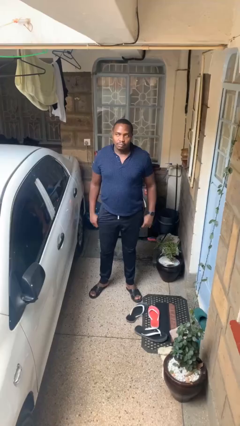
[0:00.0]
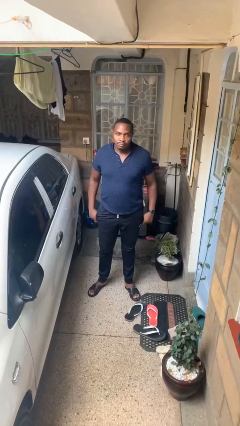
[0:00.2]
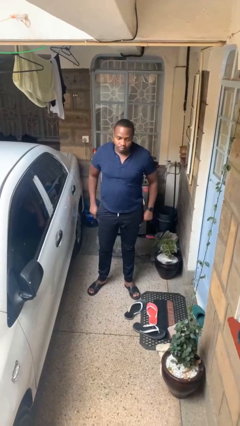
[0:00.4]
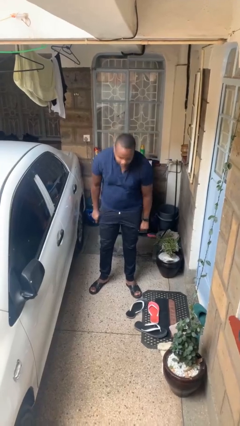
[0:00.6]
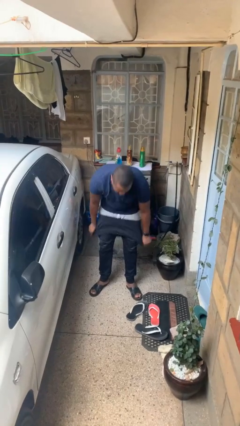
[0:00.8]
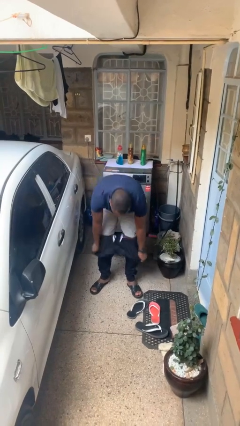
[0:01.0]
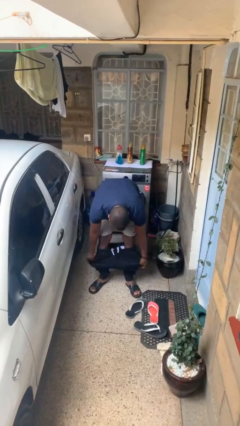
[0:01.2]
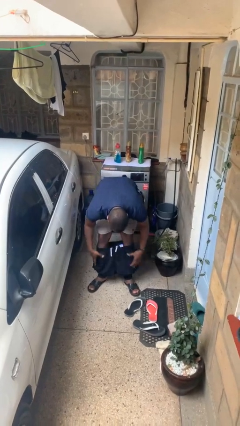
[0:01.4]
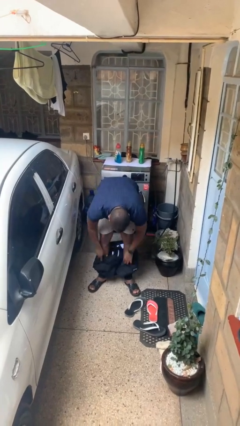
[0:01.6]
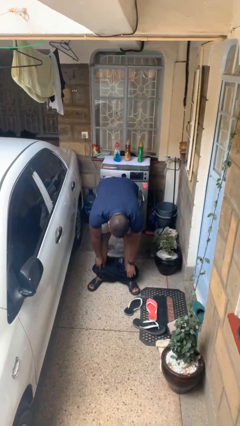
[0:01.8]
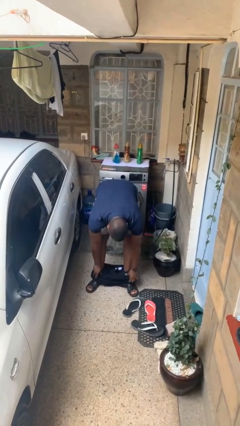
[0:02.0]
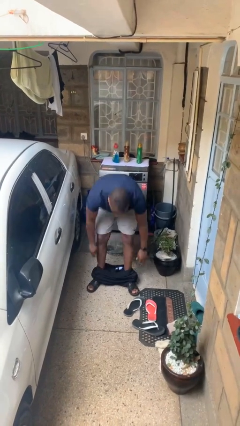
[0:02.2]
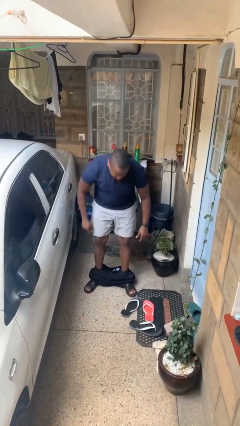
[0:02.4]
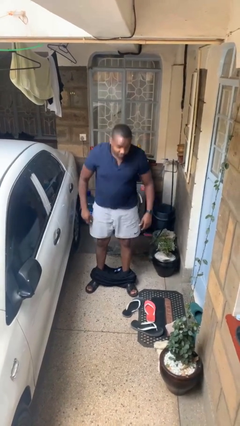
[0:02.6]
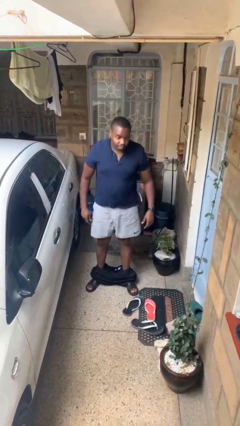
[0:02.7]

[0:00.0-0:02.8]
person takes off pants

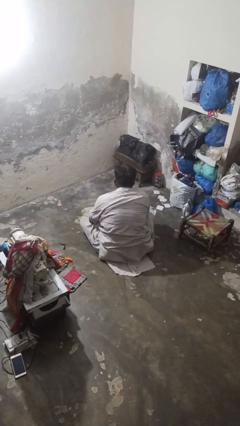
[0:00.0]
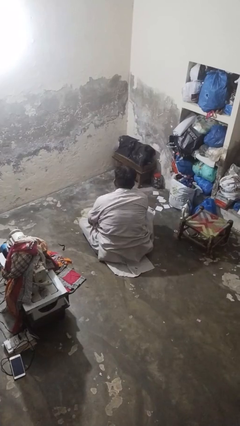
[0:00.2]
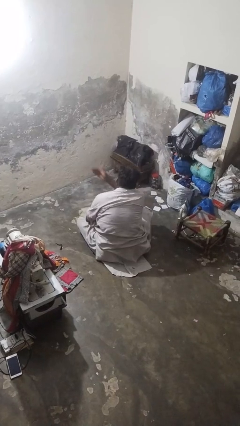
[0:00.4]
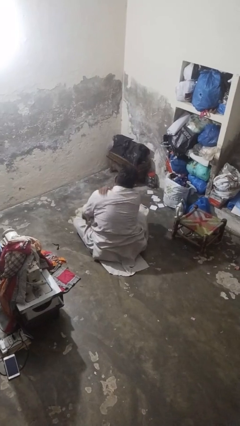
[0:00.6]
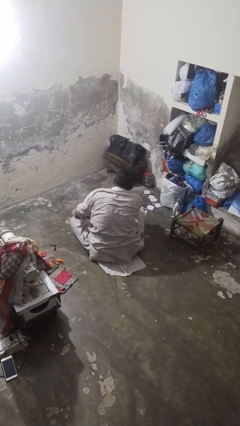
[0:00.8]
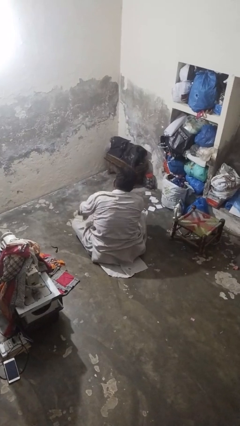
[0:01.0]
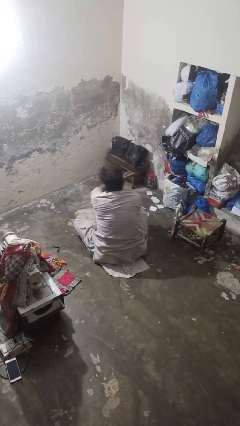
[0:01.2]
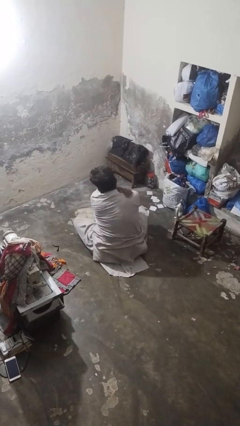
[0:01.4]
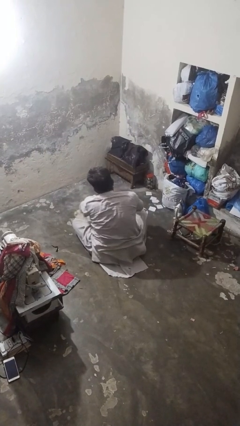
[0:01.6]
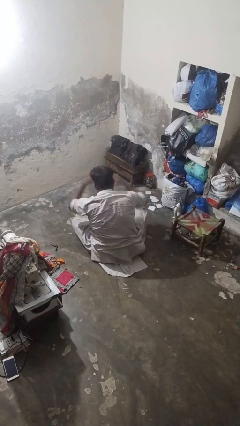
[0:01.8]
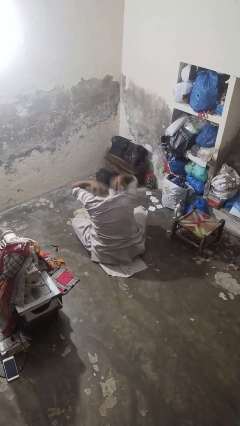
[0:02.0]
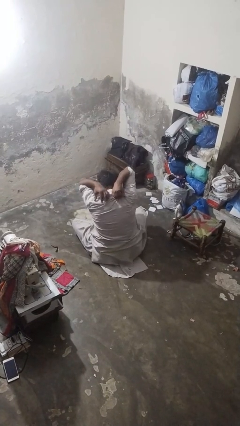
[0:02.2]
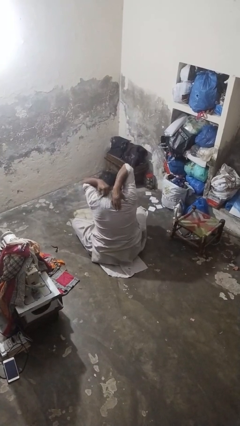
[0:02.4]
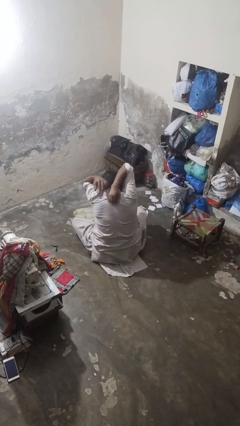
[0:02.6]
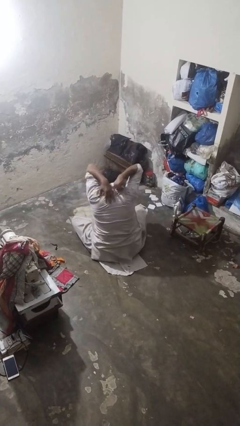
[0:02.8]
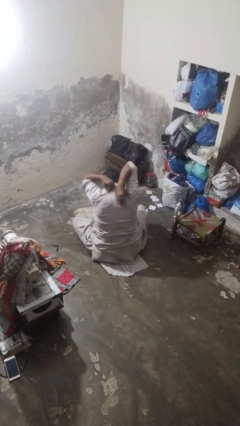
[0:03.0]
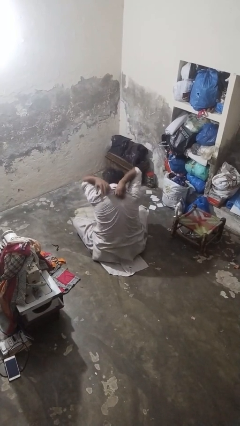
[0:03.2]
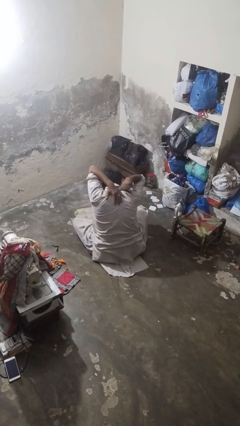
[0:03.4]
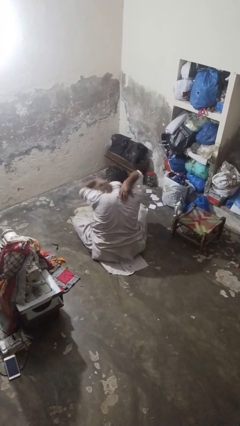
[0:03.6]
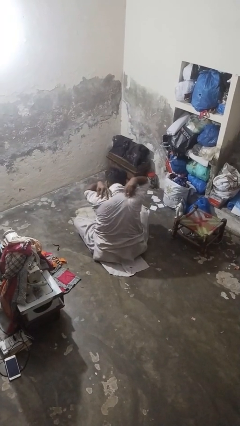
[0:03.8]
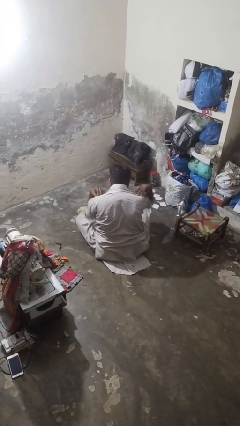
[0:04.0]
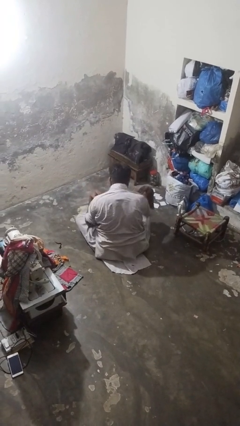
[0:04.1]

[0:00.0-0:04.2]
person swats bug

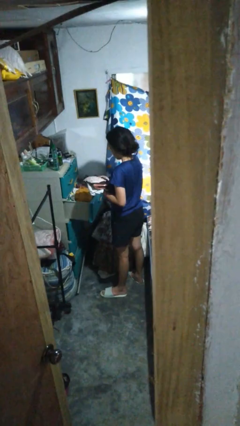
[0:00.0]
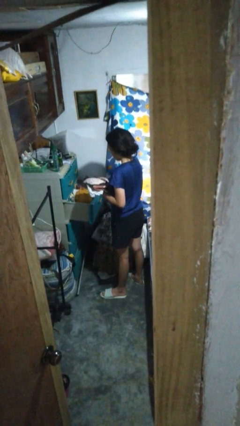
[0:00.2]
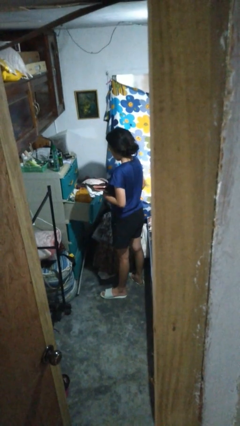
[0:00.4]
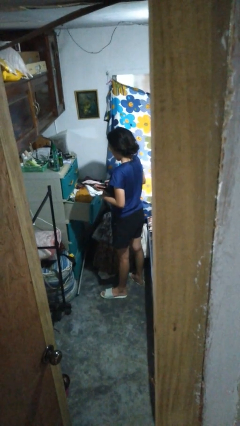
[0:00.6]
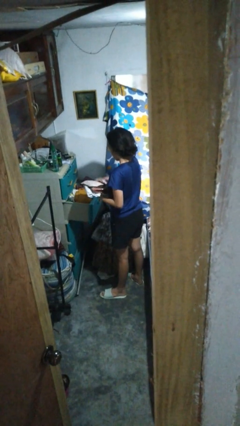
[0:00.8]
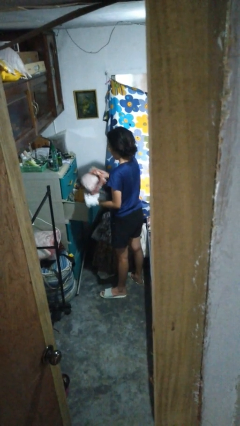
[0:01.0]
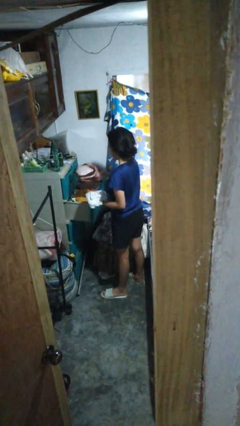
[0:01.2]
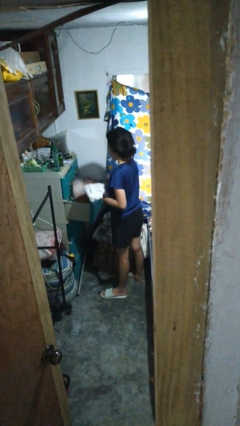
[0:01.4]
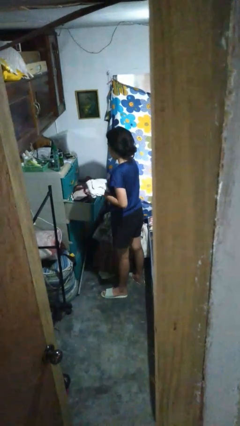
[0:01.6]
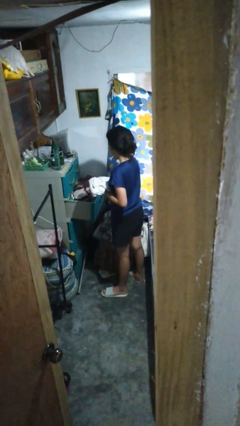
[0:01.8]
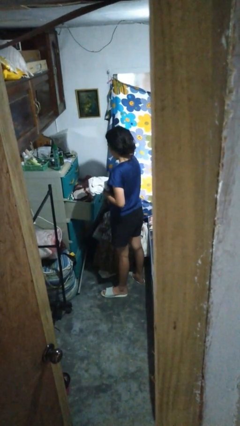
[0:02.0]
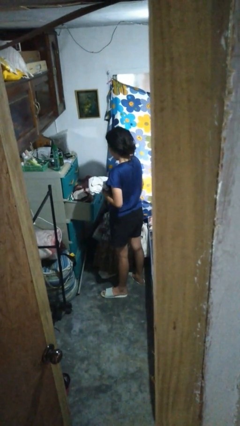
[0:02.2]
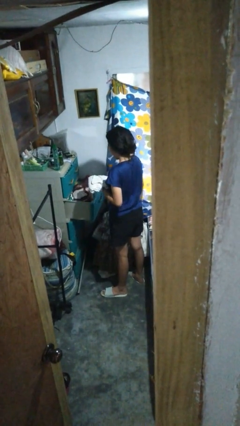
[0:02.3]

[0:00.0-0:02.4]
person puts clothes into dresser

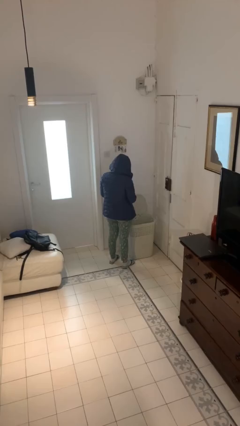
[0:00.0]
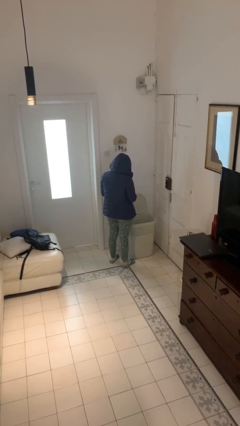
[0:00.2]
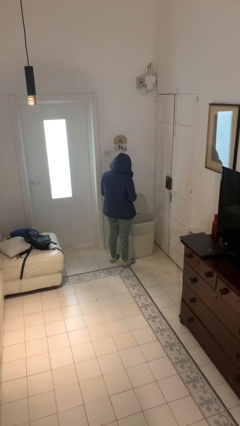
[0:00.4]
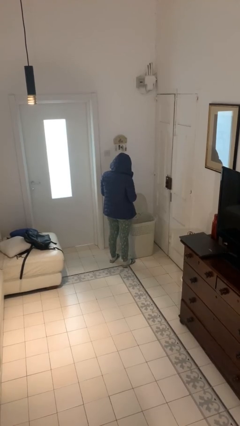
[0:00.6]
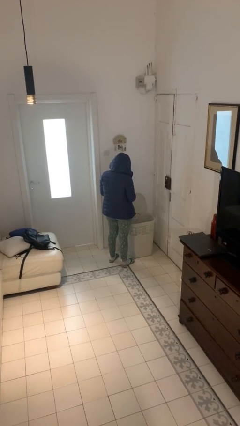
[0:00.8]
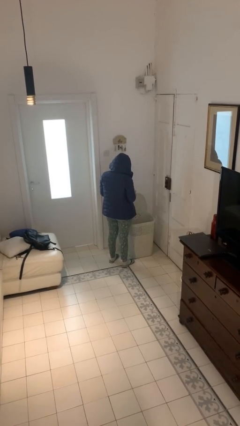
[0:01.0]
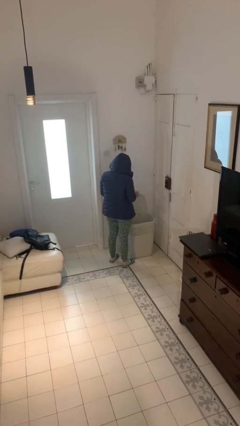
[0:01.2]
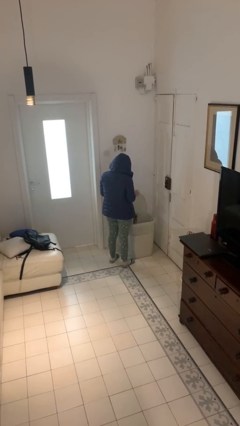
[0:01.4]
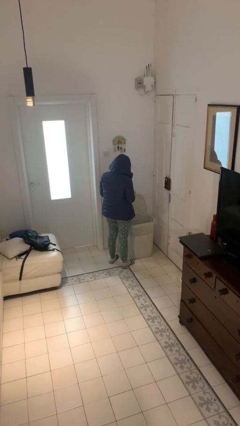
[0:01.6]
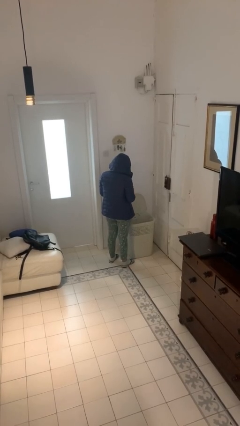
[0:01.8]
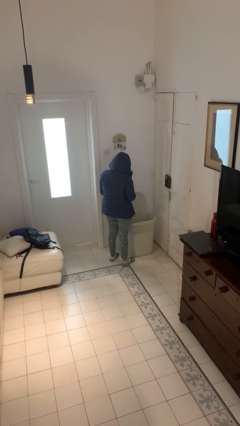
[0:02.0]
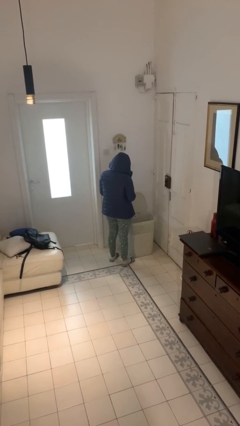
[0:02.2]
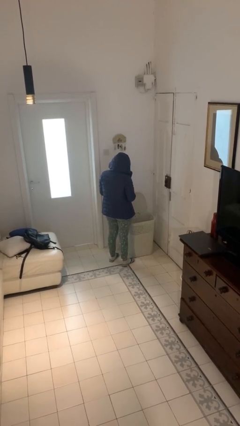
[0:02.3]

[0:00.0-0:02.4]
person discards trash

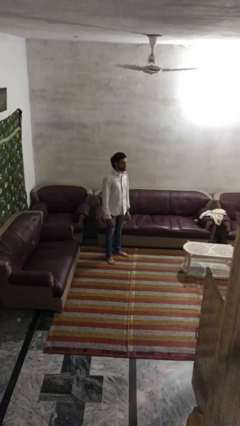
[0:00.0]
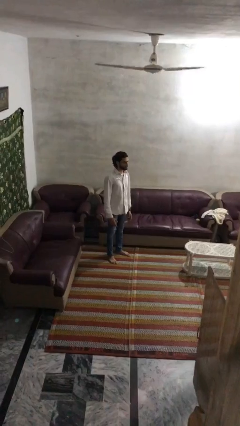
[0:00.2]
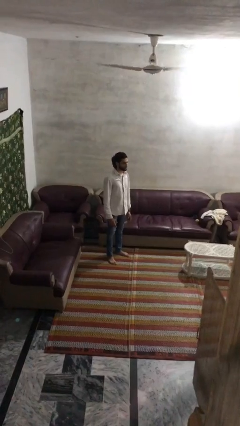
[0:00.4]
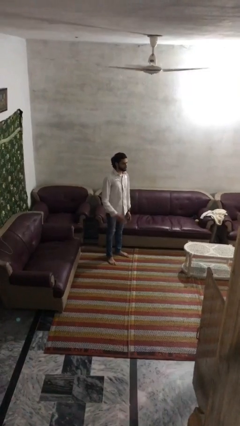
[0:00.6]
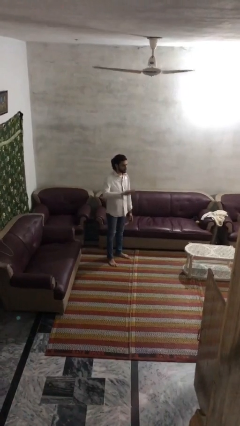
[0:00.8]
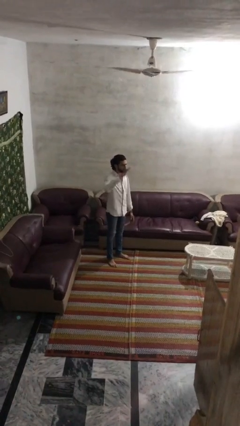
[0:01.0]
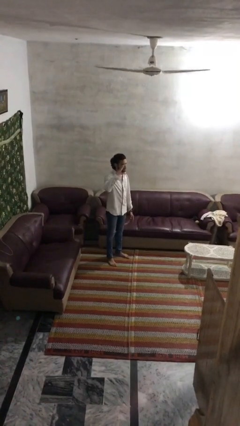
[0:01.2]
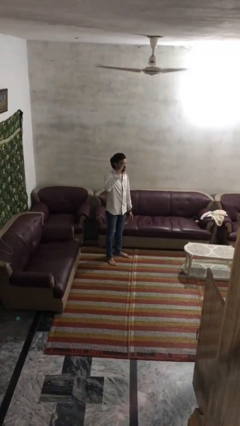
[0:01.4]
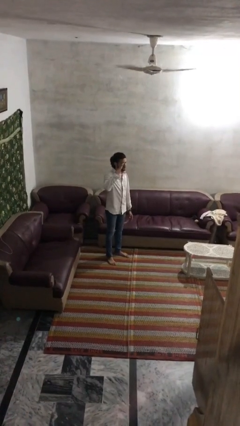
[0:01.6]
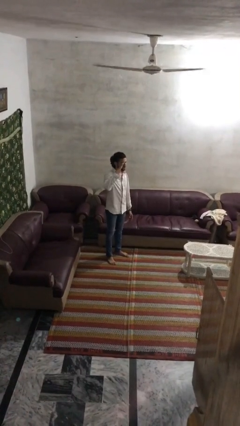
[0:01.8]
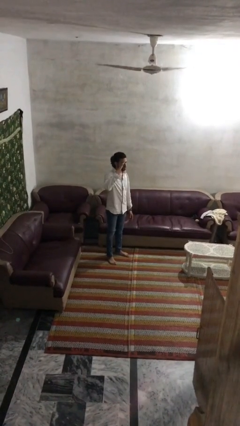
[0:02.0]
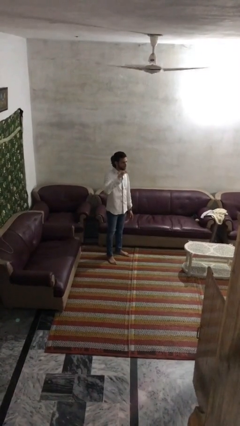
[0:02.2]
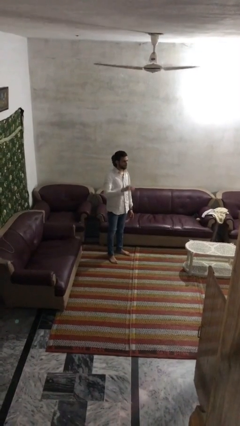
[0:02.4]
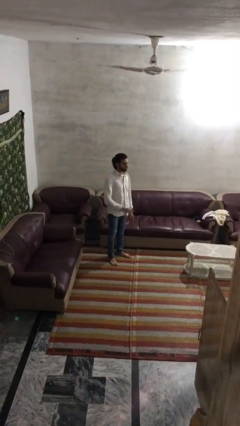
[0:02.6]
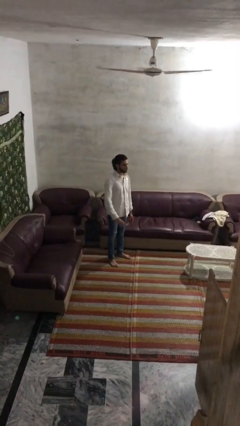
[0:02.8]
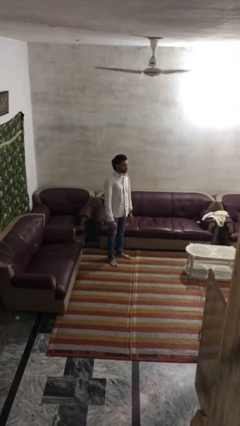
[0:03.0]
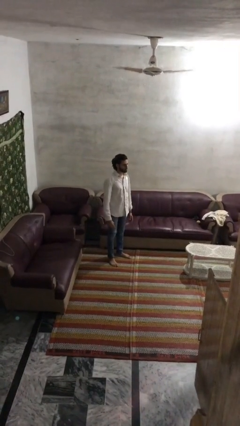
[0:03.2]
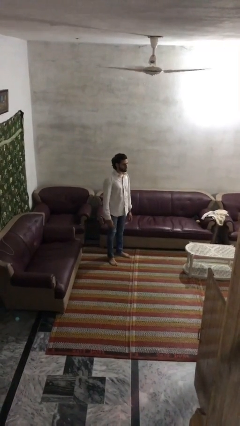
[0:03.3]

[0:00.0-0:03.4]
person salutes

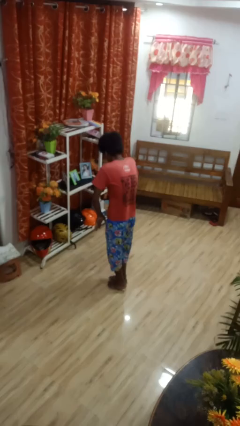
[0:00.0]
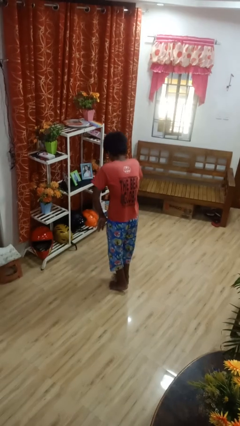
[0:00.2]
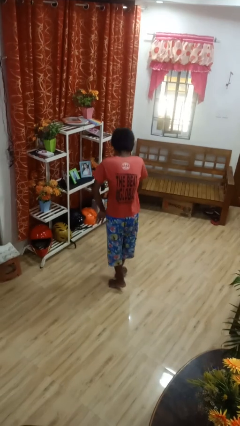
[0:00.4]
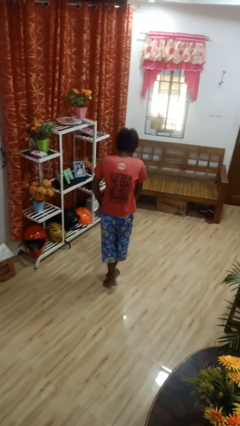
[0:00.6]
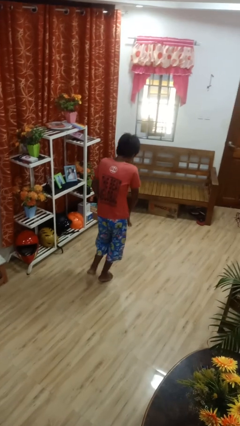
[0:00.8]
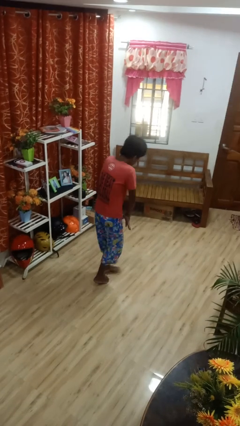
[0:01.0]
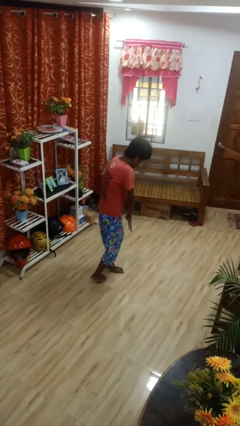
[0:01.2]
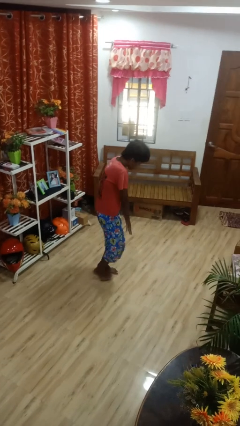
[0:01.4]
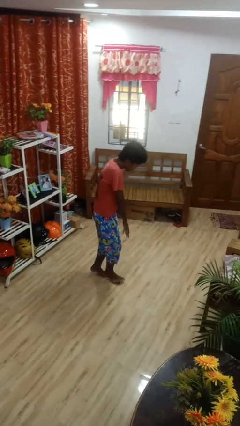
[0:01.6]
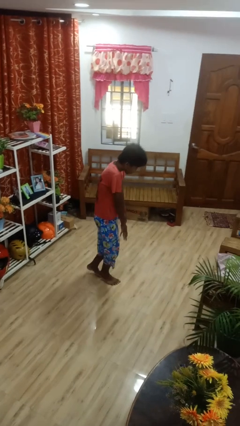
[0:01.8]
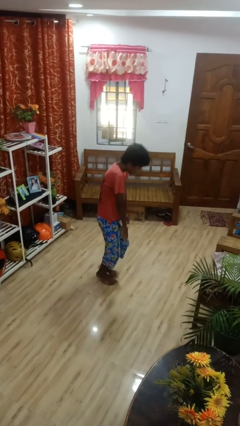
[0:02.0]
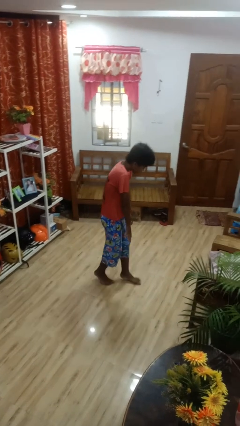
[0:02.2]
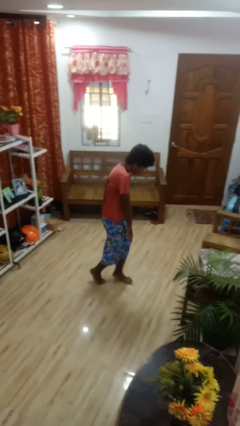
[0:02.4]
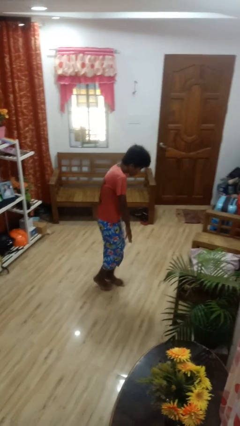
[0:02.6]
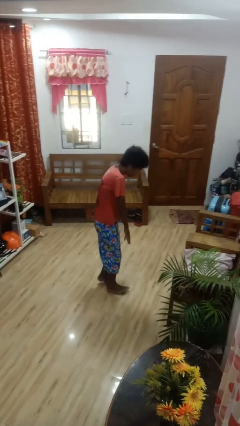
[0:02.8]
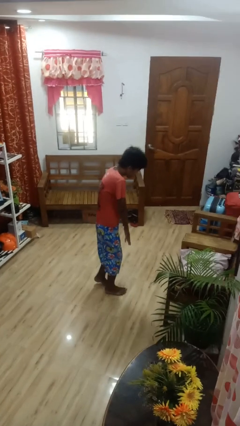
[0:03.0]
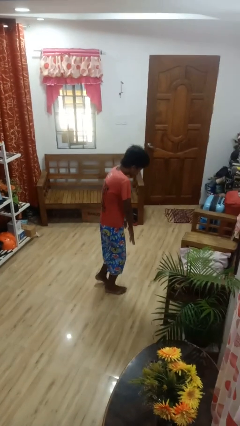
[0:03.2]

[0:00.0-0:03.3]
person walks tiptoe
